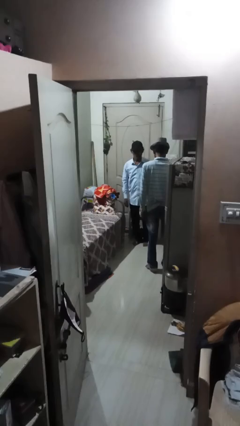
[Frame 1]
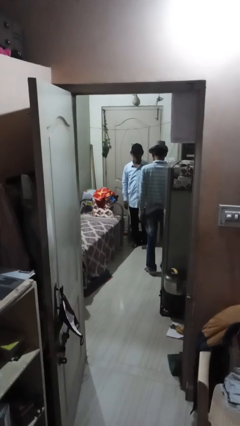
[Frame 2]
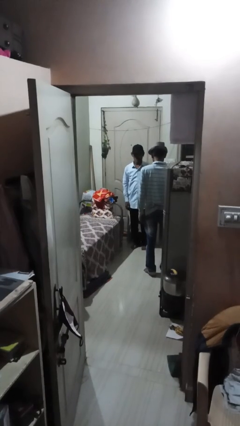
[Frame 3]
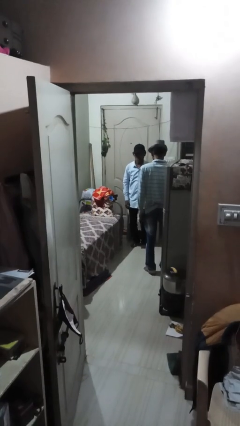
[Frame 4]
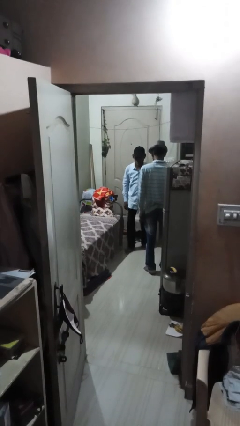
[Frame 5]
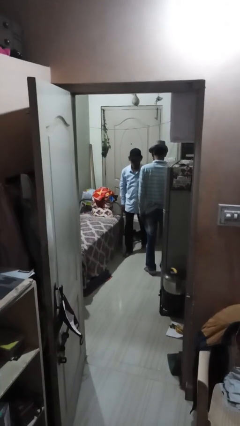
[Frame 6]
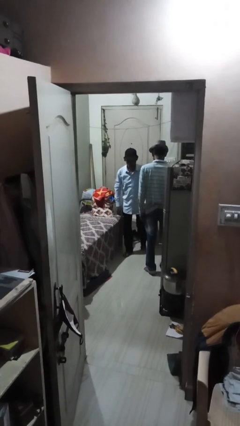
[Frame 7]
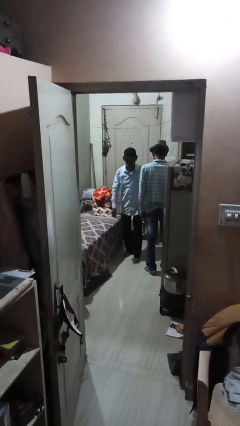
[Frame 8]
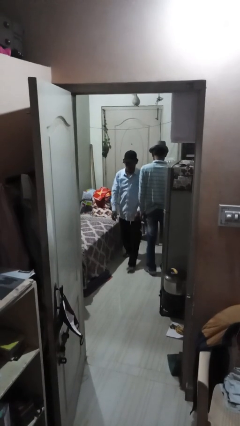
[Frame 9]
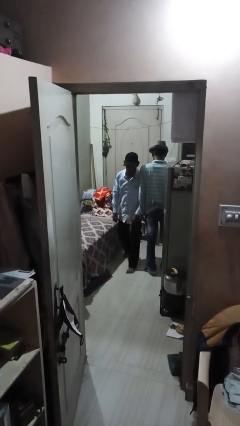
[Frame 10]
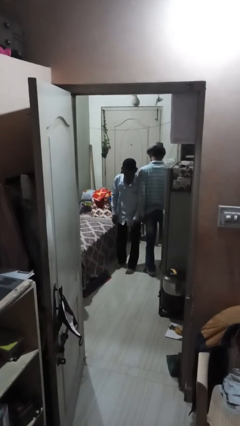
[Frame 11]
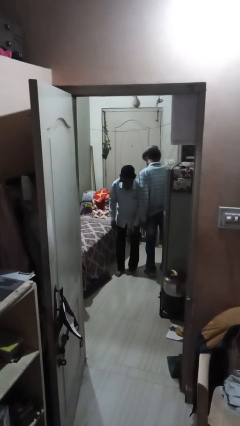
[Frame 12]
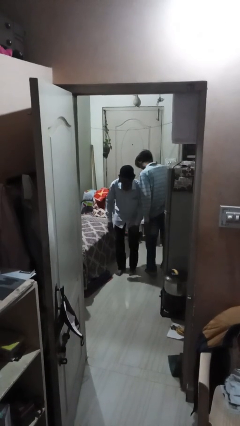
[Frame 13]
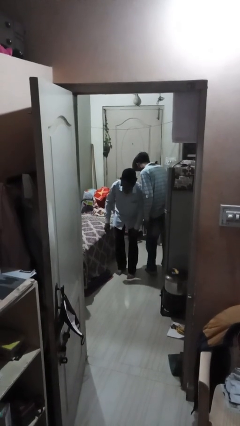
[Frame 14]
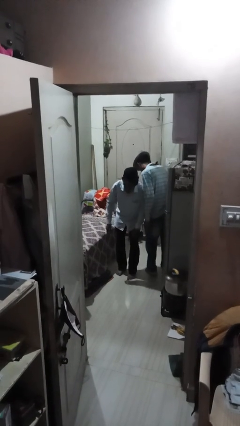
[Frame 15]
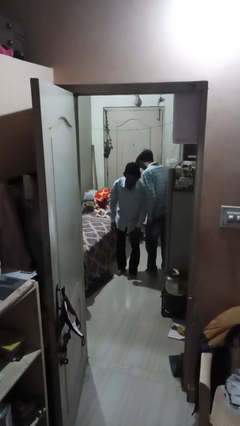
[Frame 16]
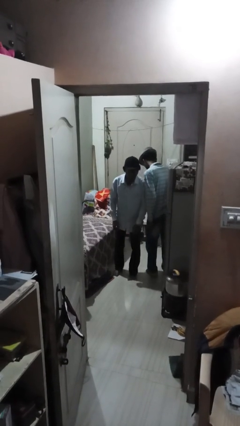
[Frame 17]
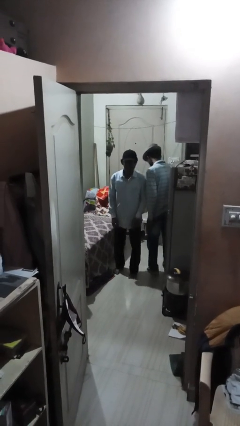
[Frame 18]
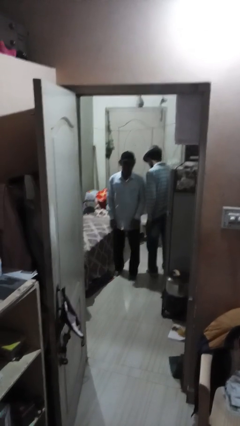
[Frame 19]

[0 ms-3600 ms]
person bumps into person

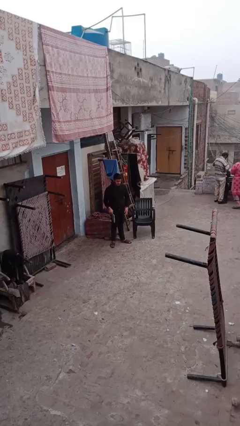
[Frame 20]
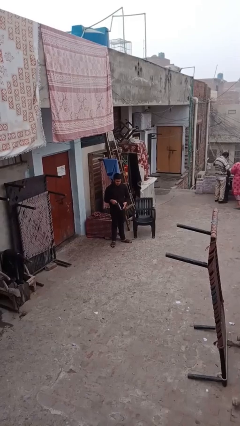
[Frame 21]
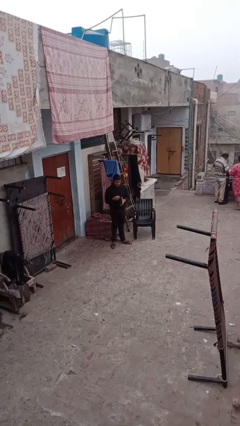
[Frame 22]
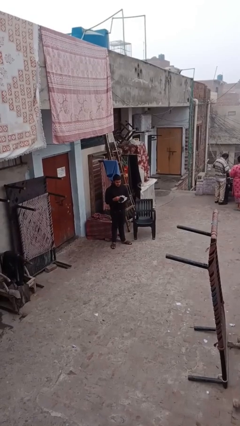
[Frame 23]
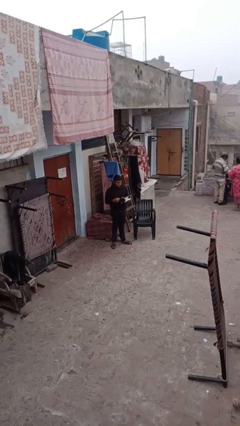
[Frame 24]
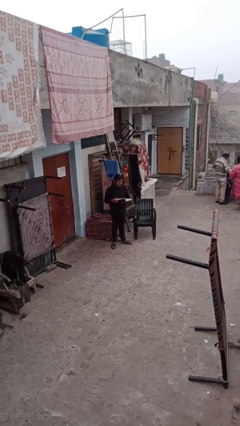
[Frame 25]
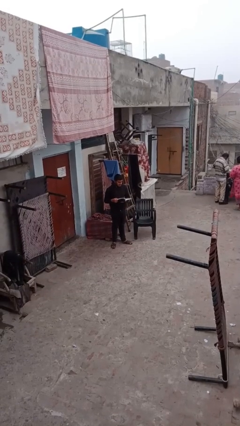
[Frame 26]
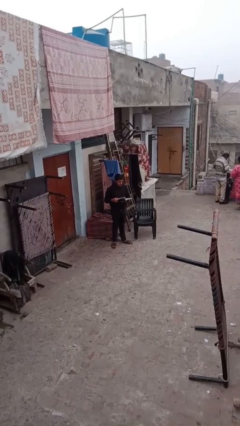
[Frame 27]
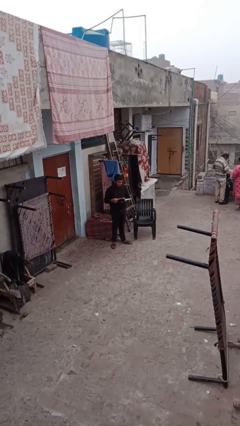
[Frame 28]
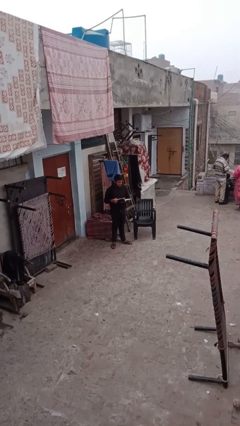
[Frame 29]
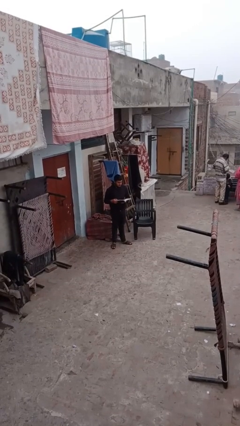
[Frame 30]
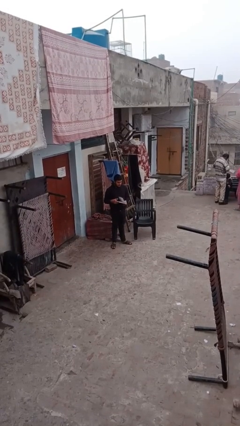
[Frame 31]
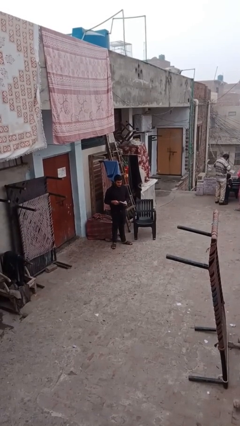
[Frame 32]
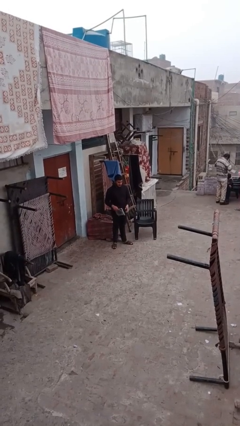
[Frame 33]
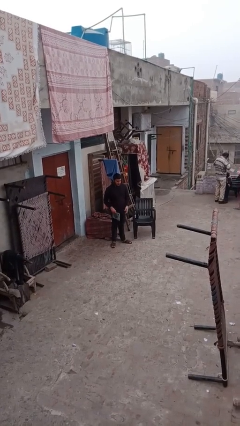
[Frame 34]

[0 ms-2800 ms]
person reads document

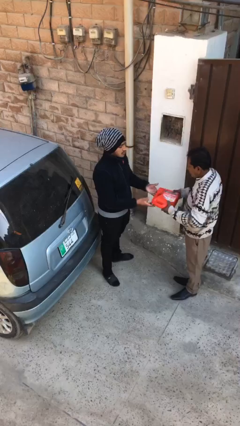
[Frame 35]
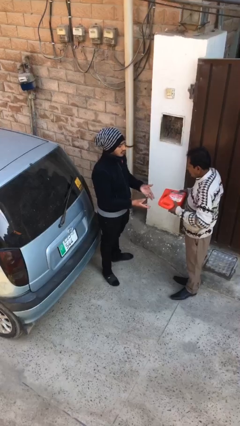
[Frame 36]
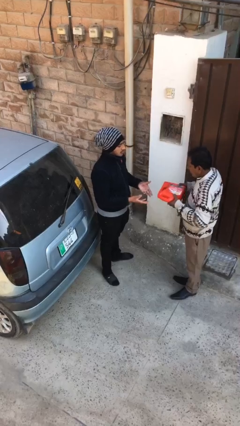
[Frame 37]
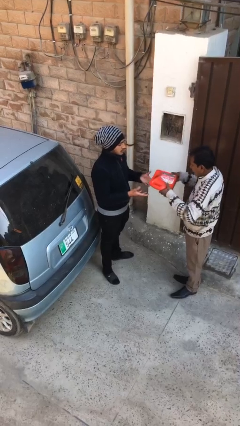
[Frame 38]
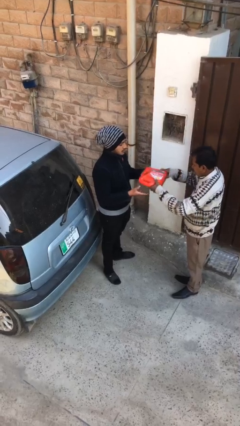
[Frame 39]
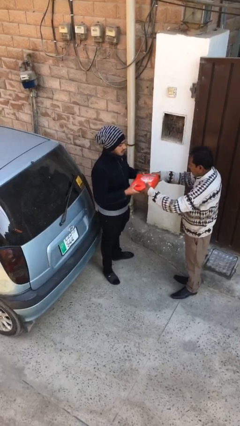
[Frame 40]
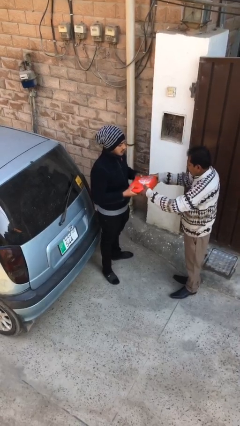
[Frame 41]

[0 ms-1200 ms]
person transfers object to person

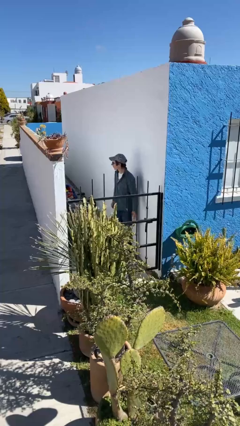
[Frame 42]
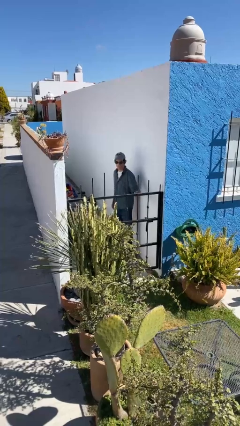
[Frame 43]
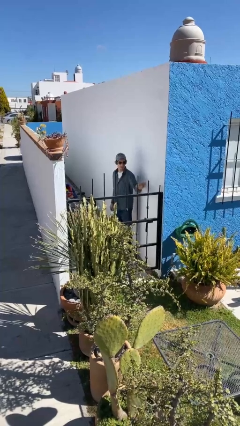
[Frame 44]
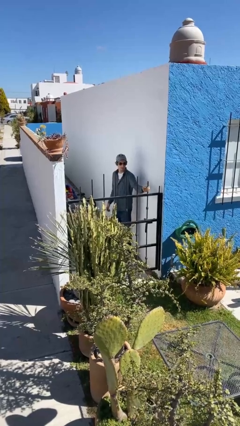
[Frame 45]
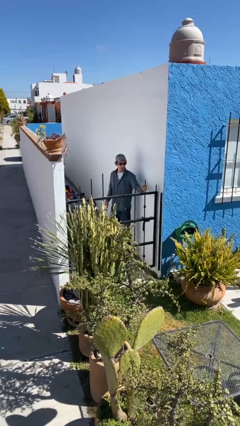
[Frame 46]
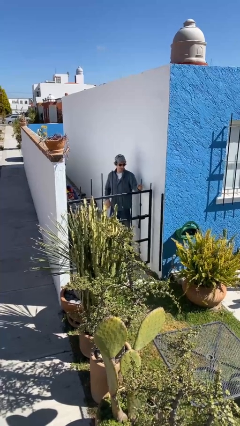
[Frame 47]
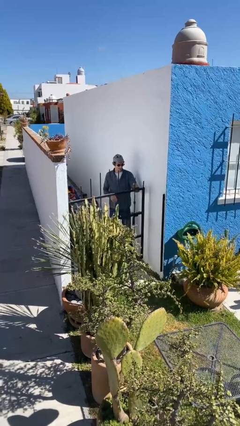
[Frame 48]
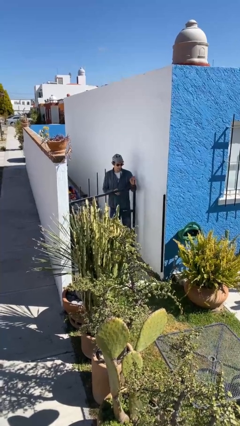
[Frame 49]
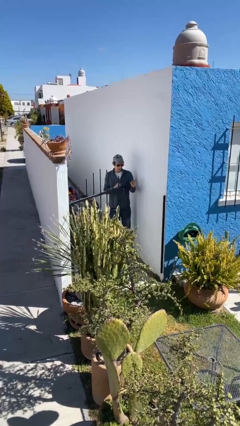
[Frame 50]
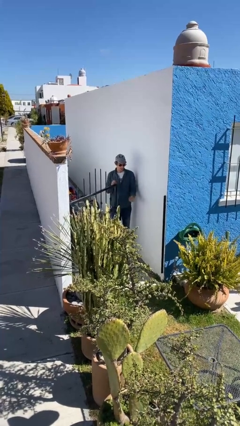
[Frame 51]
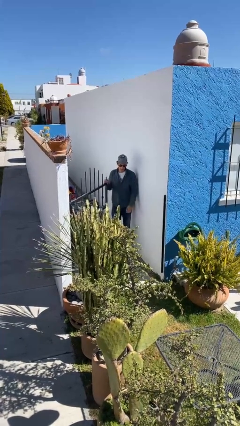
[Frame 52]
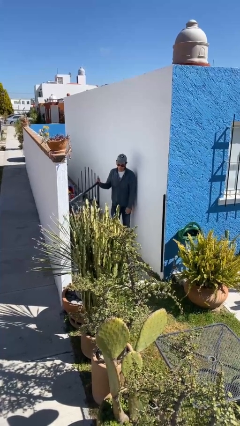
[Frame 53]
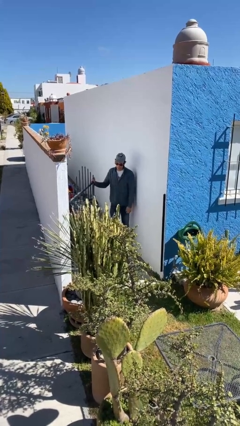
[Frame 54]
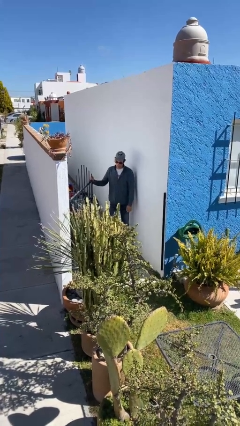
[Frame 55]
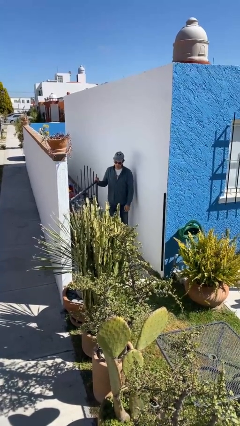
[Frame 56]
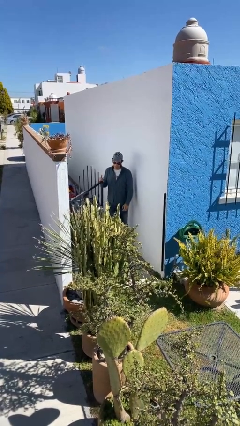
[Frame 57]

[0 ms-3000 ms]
person opens facility door

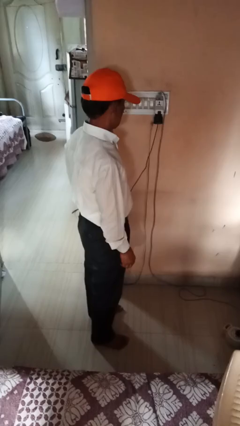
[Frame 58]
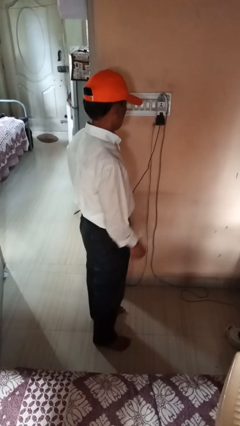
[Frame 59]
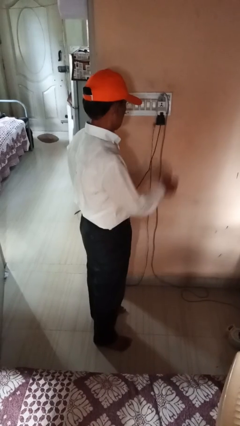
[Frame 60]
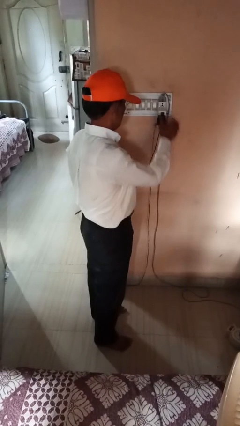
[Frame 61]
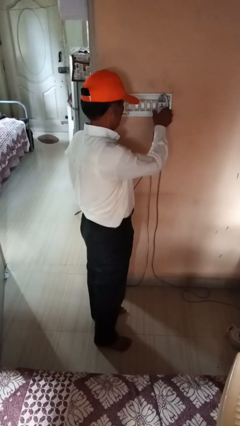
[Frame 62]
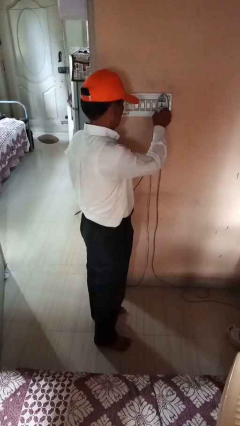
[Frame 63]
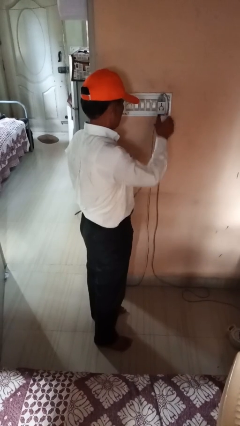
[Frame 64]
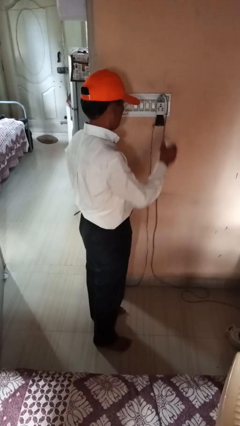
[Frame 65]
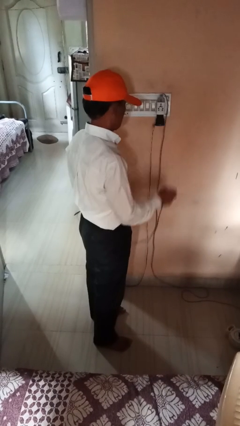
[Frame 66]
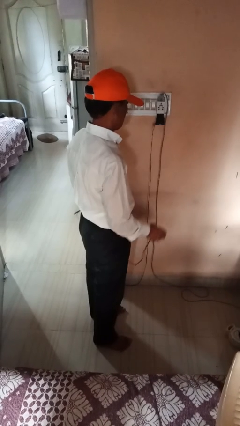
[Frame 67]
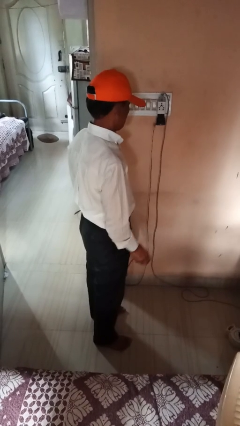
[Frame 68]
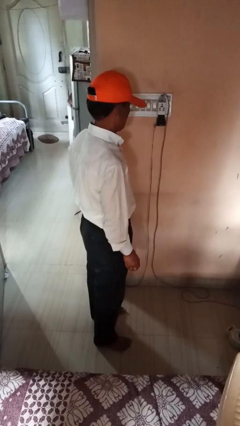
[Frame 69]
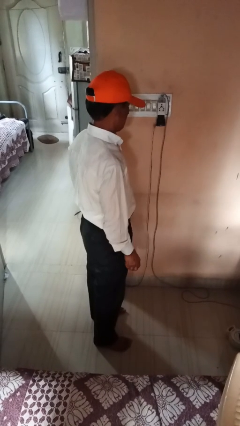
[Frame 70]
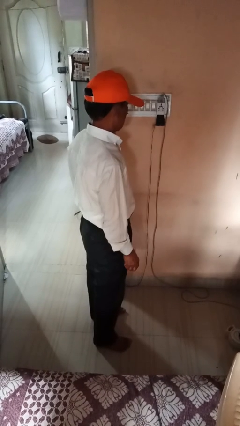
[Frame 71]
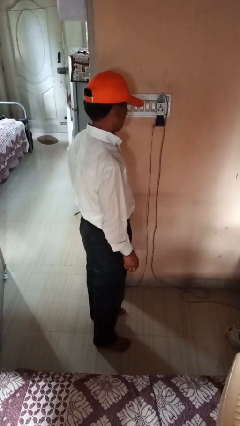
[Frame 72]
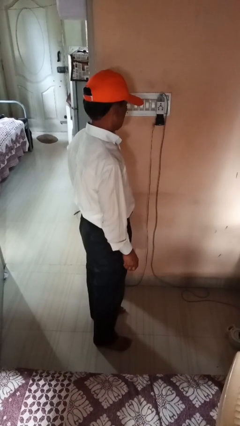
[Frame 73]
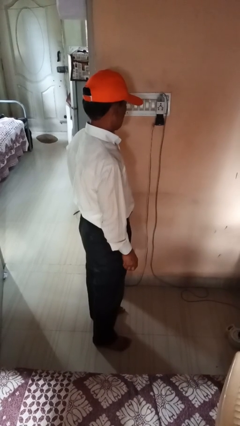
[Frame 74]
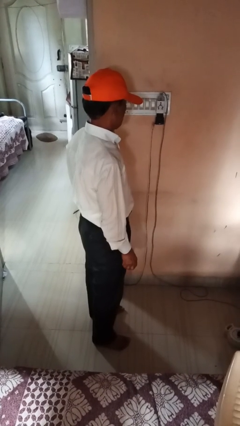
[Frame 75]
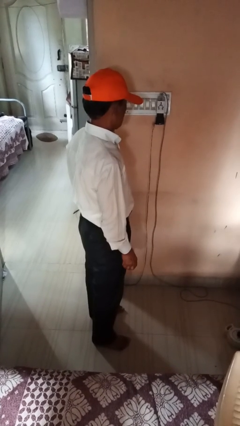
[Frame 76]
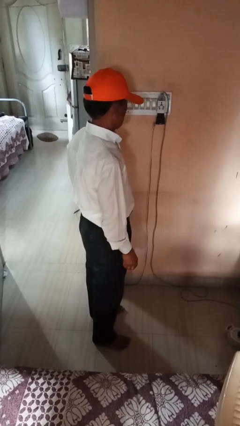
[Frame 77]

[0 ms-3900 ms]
person unplugs from electrical socket

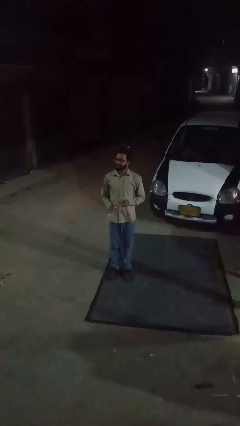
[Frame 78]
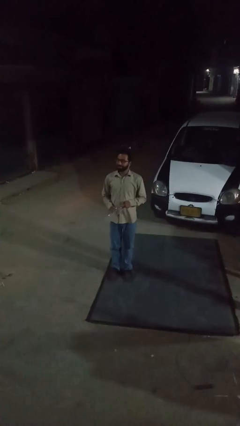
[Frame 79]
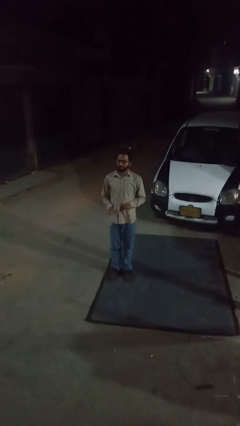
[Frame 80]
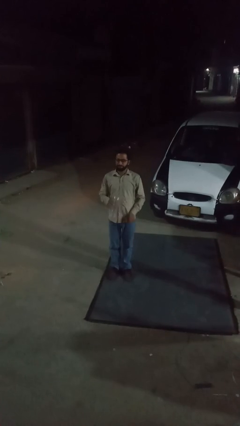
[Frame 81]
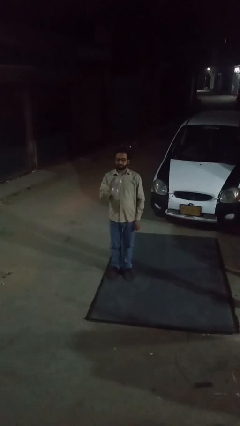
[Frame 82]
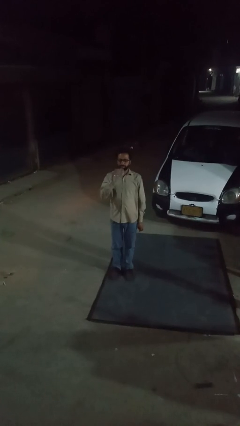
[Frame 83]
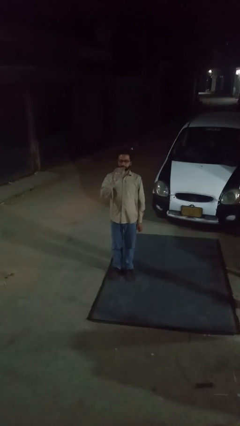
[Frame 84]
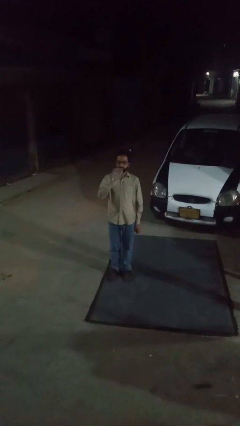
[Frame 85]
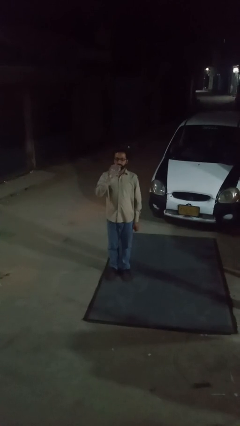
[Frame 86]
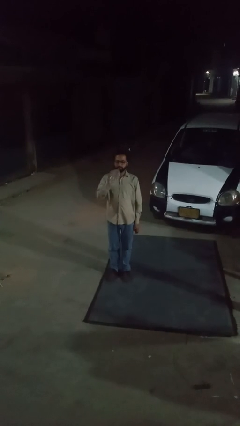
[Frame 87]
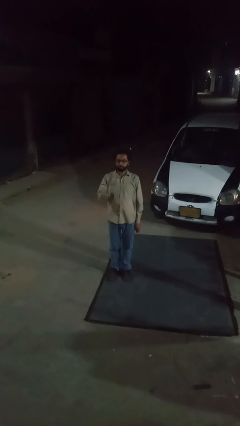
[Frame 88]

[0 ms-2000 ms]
person drinks from bottle

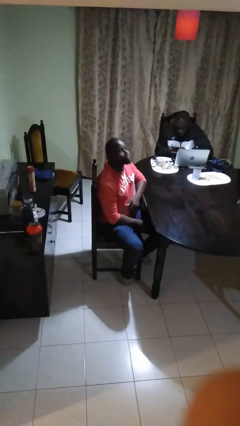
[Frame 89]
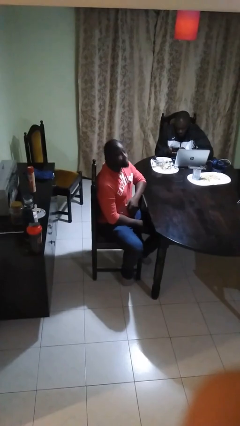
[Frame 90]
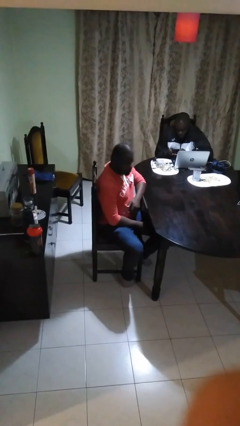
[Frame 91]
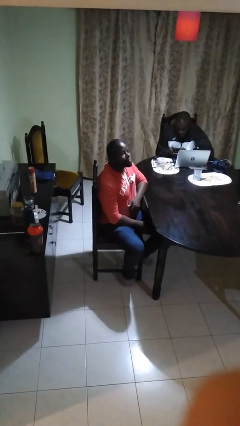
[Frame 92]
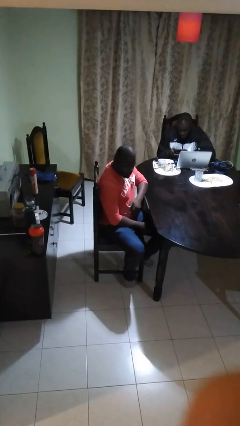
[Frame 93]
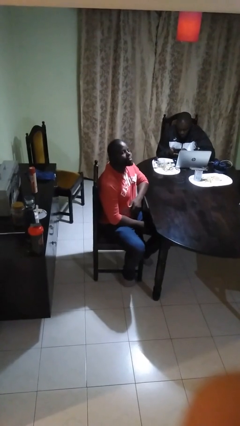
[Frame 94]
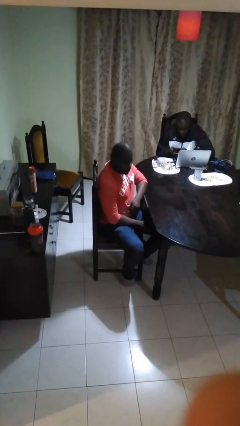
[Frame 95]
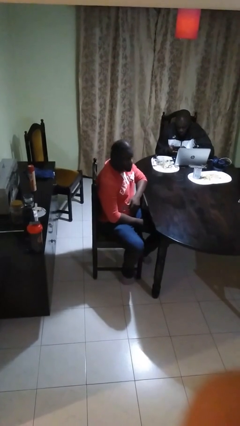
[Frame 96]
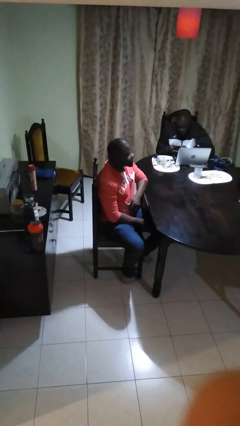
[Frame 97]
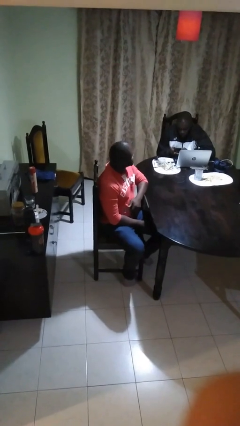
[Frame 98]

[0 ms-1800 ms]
person nods head
